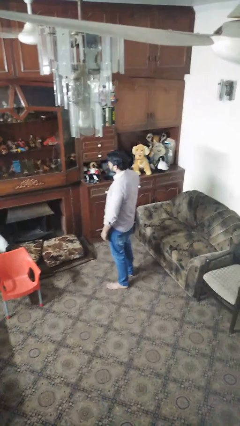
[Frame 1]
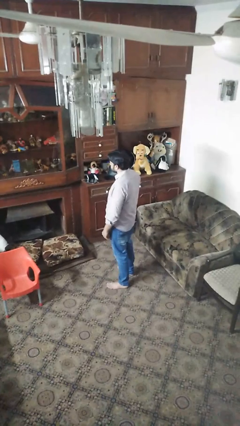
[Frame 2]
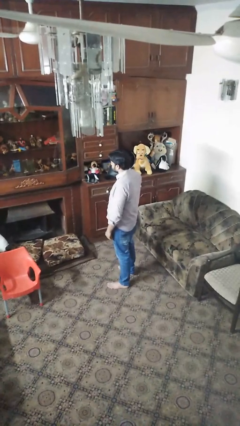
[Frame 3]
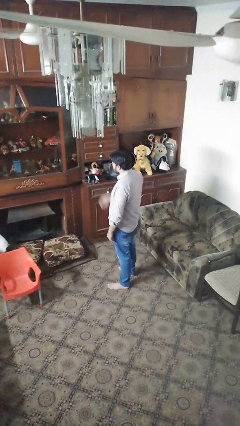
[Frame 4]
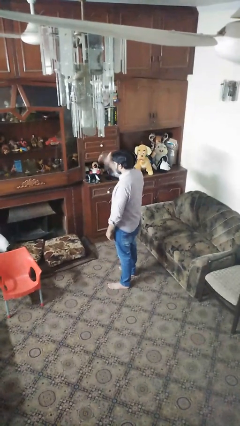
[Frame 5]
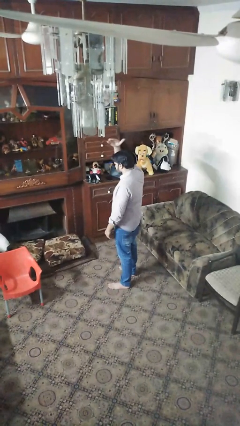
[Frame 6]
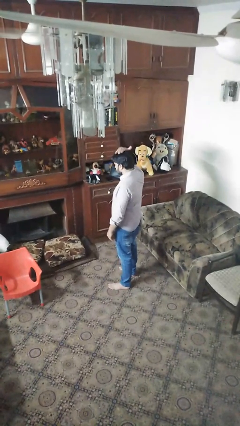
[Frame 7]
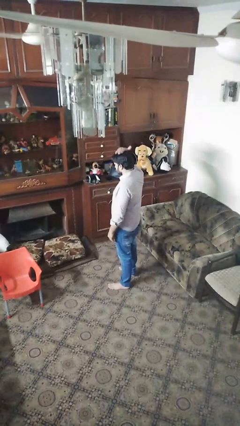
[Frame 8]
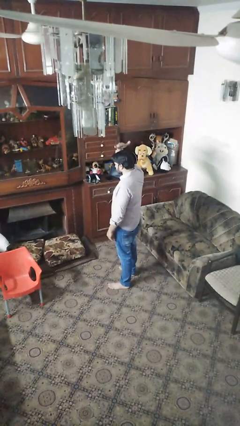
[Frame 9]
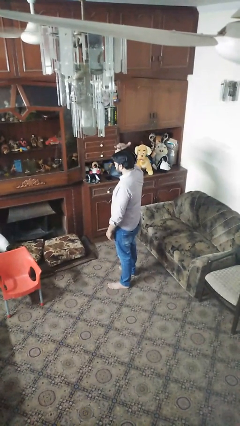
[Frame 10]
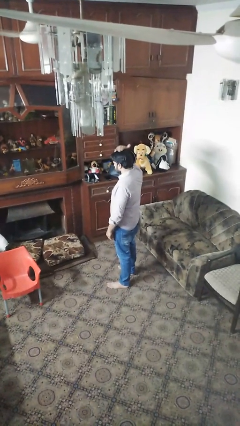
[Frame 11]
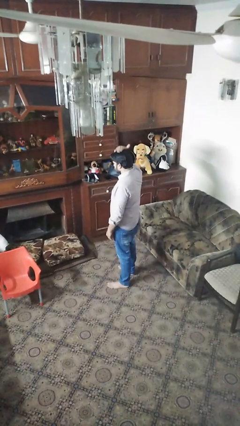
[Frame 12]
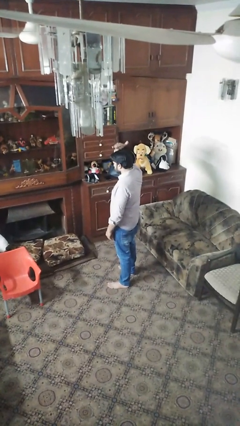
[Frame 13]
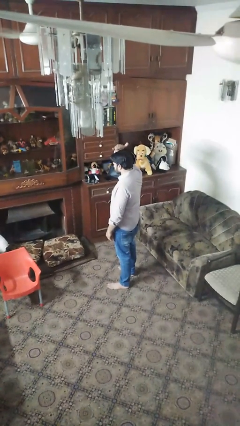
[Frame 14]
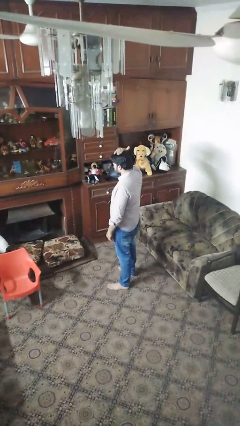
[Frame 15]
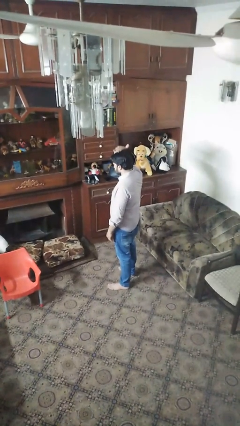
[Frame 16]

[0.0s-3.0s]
person pats head

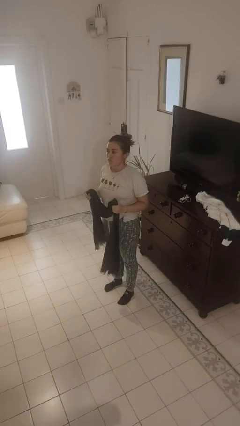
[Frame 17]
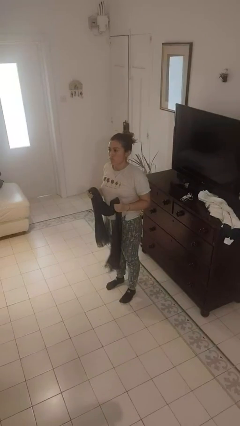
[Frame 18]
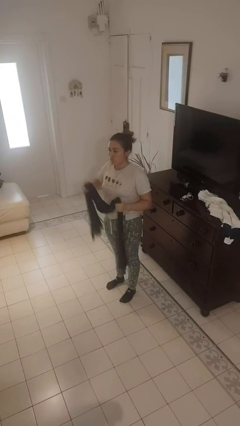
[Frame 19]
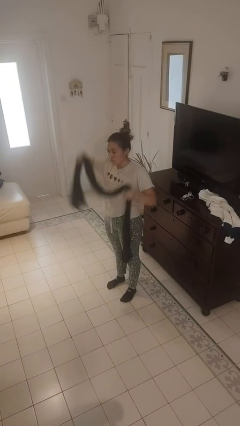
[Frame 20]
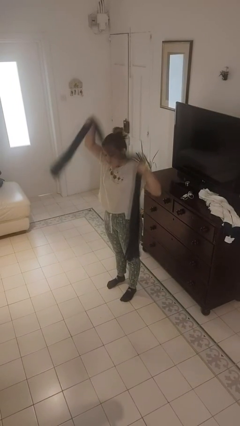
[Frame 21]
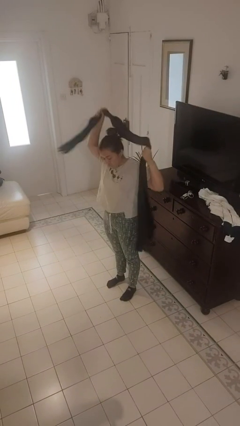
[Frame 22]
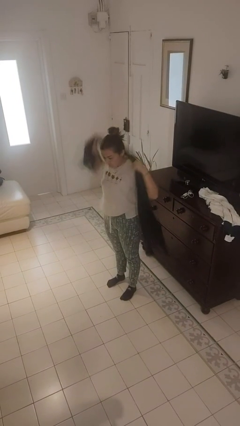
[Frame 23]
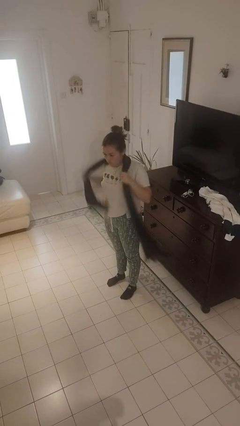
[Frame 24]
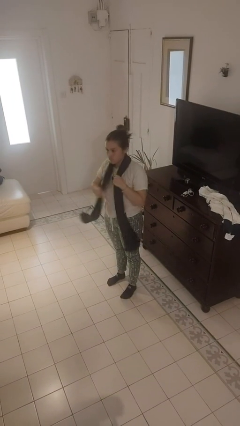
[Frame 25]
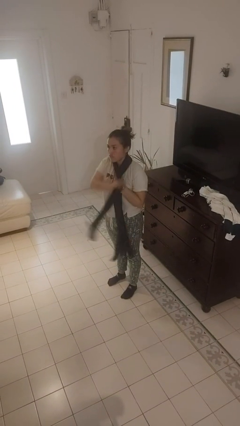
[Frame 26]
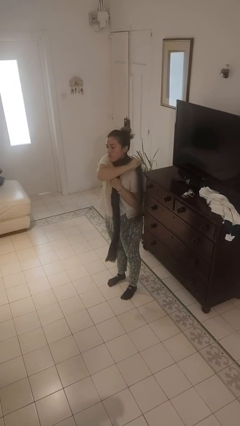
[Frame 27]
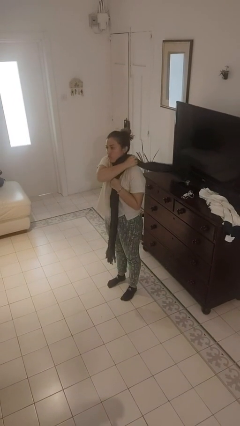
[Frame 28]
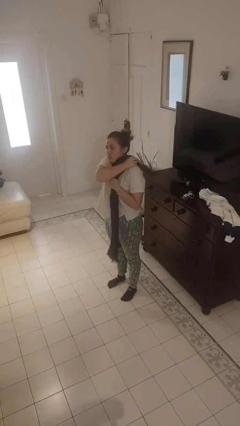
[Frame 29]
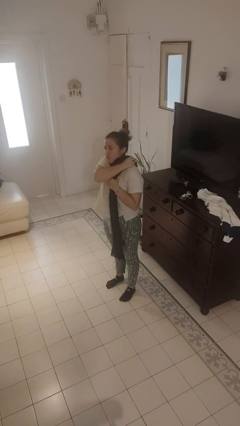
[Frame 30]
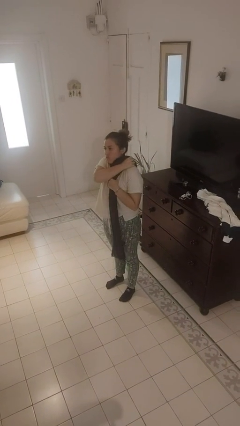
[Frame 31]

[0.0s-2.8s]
person puts on scarf

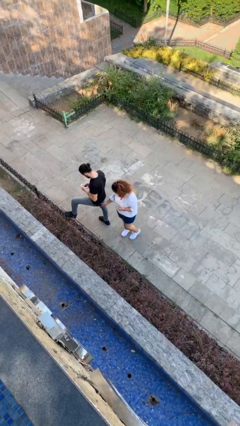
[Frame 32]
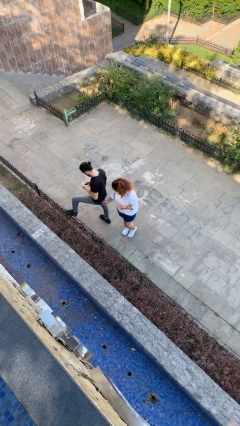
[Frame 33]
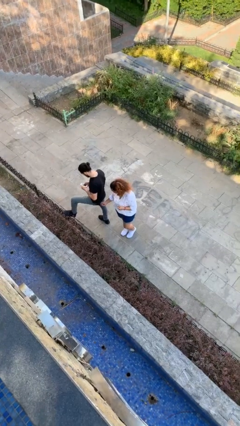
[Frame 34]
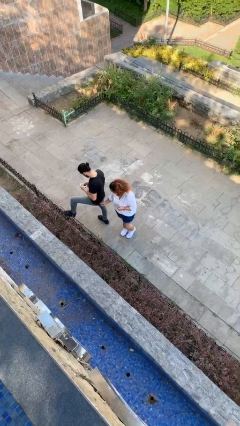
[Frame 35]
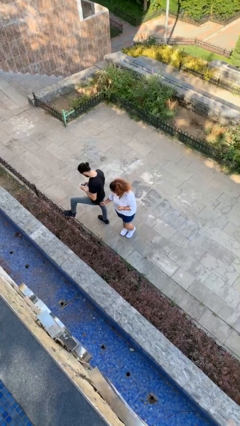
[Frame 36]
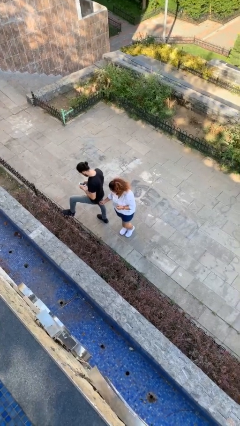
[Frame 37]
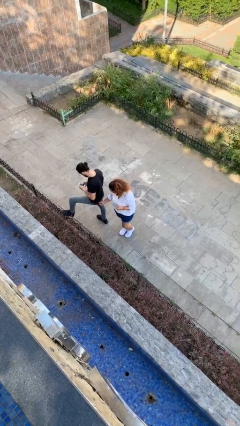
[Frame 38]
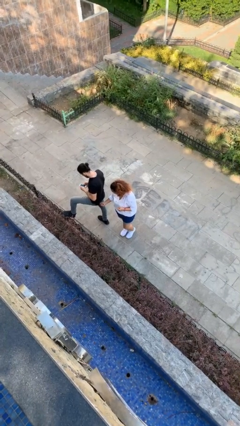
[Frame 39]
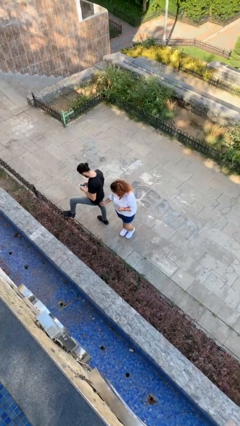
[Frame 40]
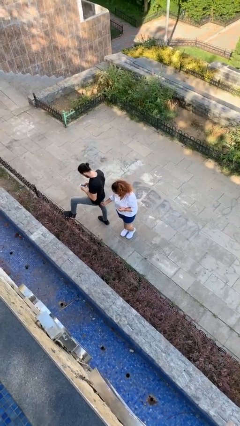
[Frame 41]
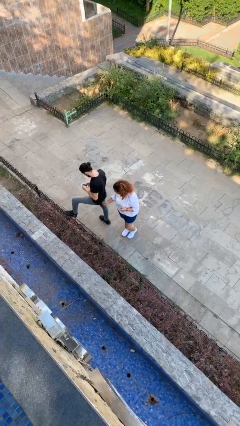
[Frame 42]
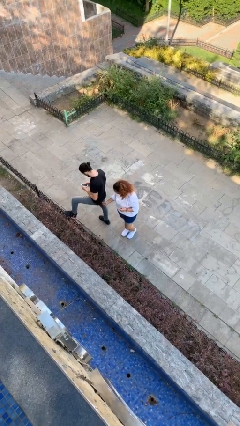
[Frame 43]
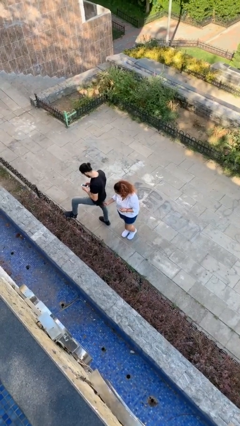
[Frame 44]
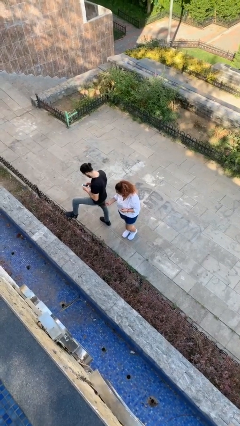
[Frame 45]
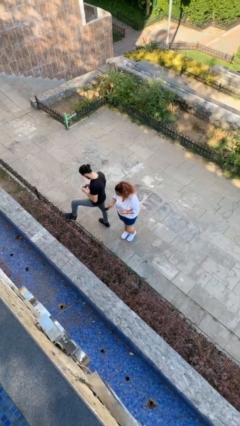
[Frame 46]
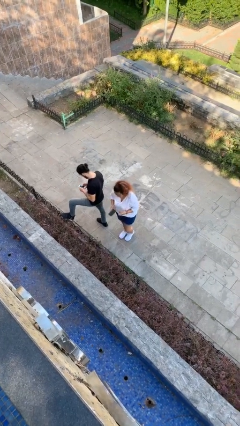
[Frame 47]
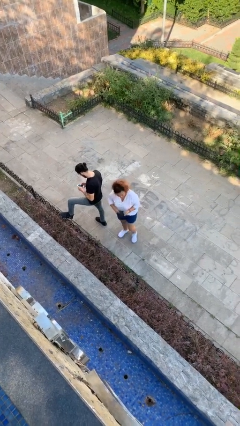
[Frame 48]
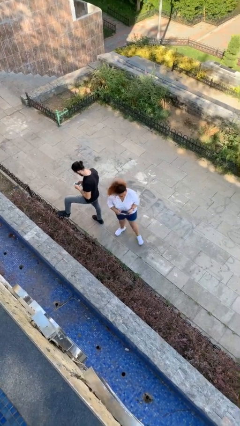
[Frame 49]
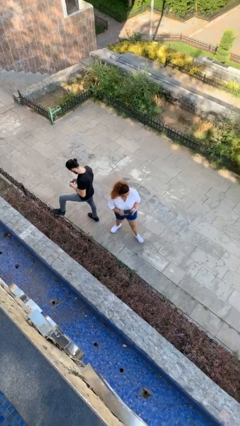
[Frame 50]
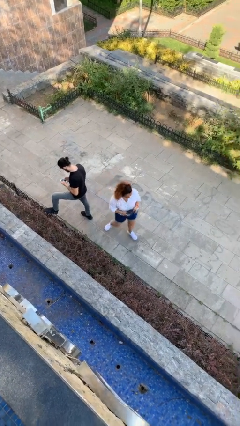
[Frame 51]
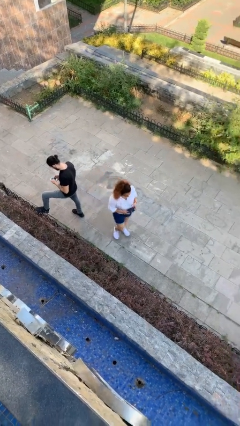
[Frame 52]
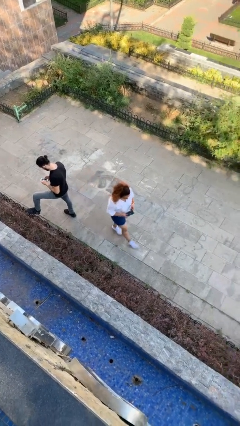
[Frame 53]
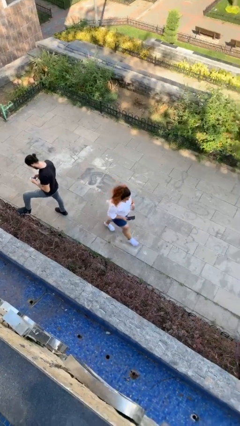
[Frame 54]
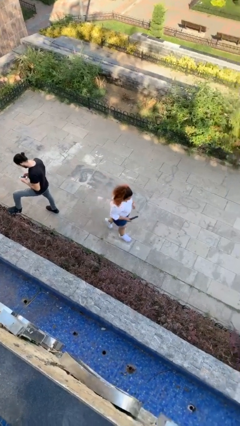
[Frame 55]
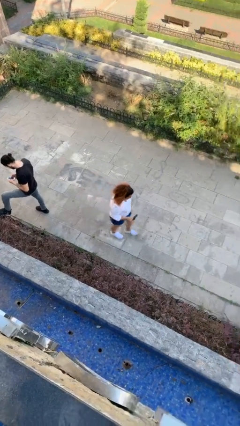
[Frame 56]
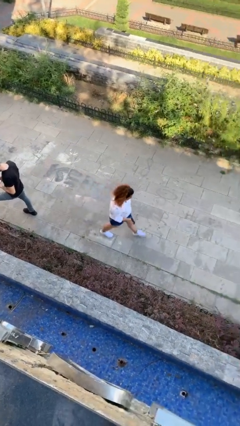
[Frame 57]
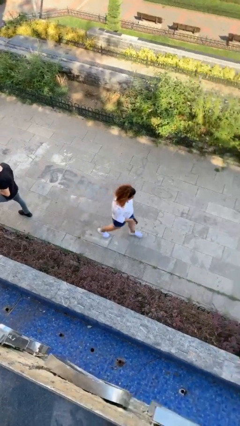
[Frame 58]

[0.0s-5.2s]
person steals object from person

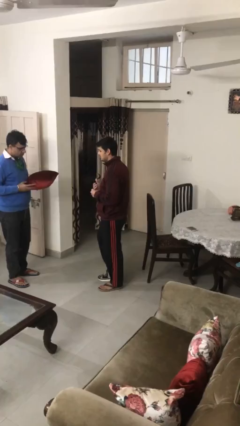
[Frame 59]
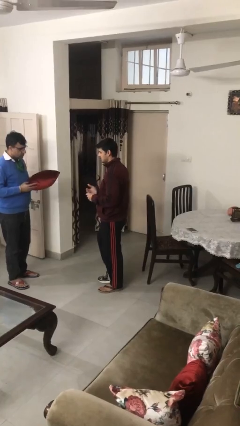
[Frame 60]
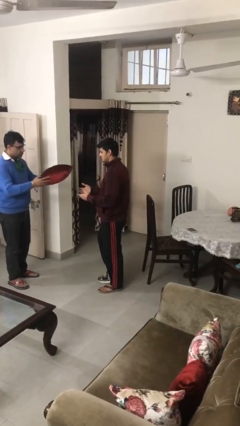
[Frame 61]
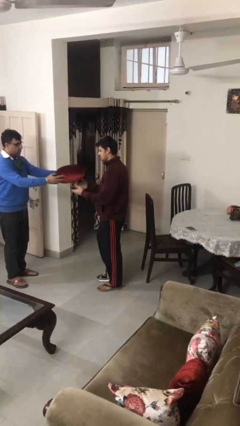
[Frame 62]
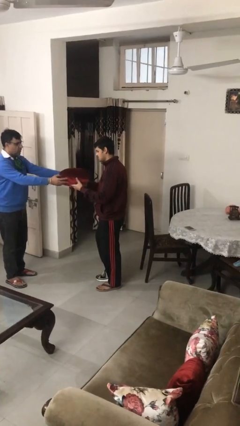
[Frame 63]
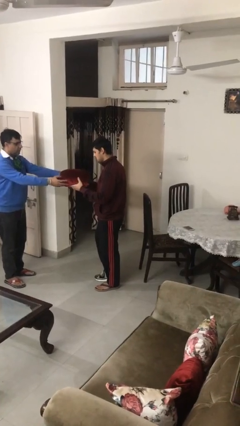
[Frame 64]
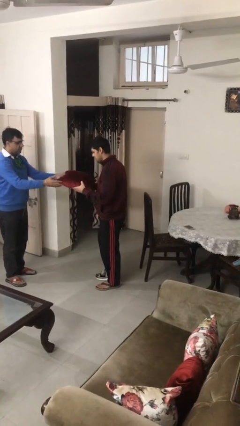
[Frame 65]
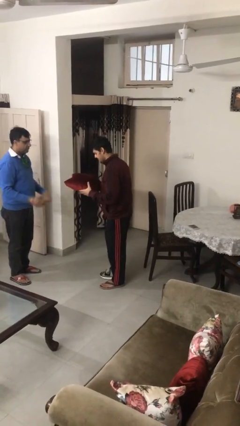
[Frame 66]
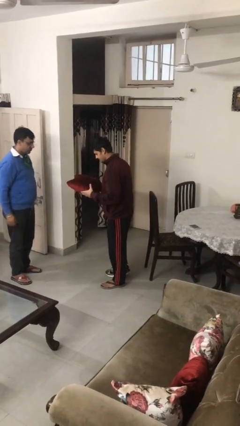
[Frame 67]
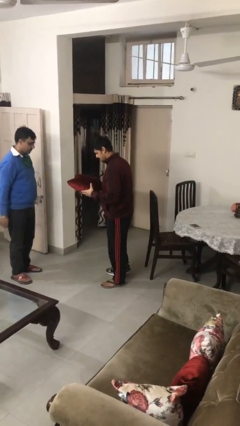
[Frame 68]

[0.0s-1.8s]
person transfers object to person

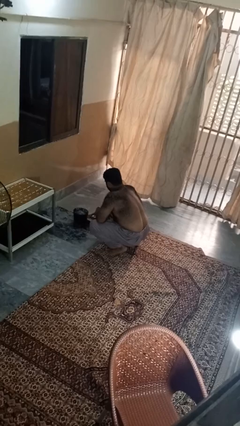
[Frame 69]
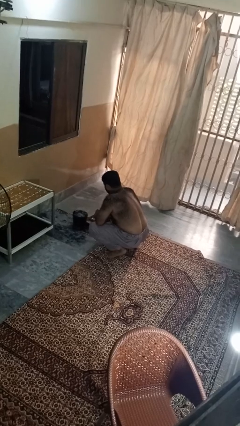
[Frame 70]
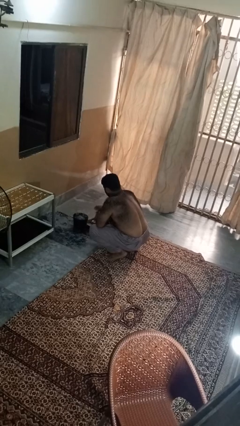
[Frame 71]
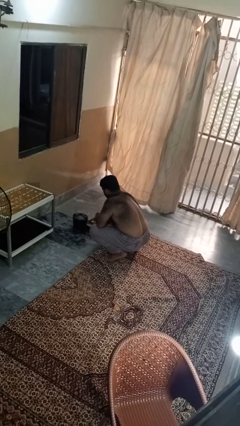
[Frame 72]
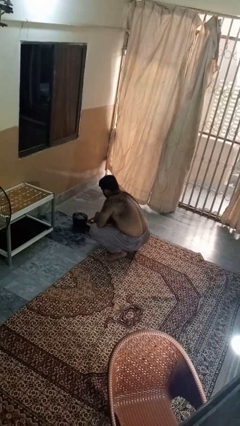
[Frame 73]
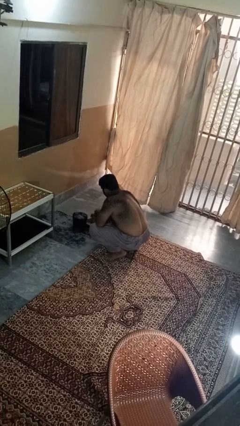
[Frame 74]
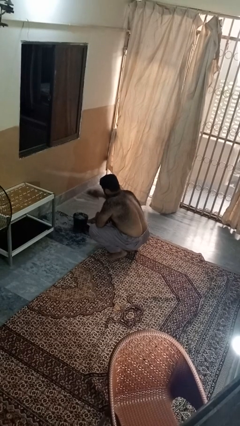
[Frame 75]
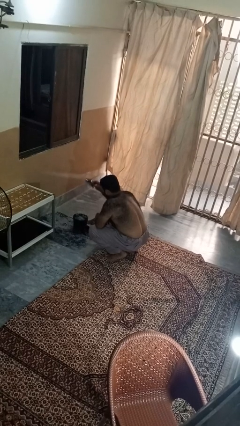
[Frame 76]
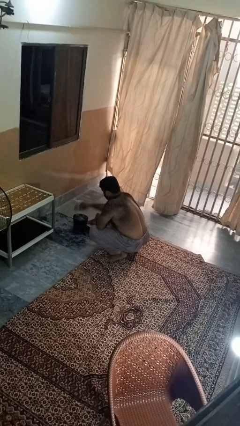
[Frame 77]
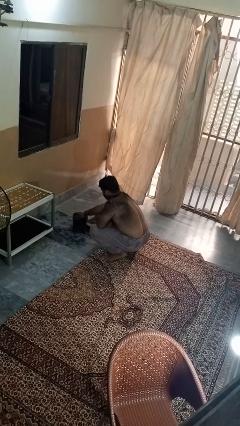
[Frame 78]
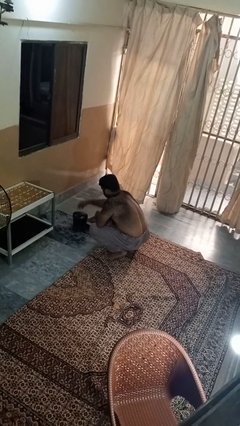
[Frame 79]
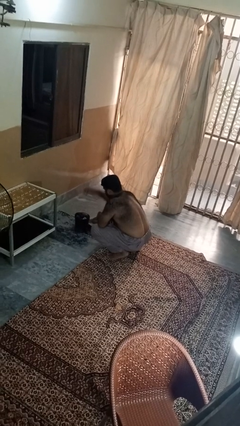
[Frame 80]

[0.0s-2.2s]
person discards trash

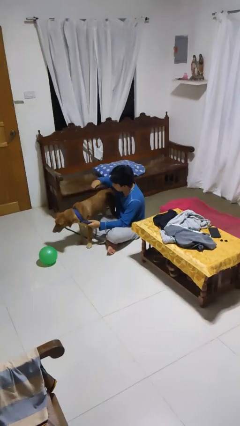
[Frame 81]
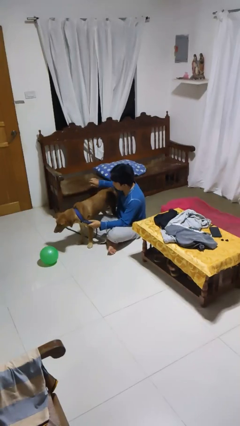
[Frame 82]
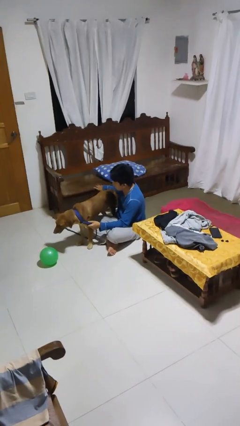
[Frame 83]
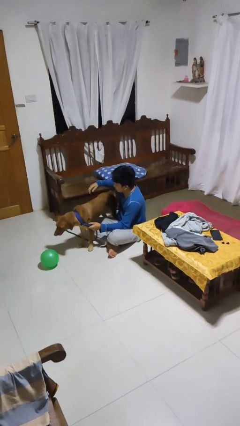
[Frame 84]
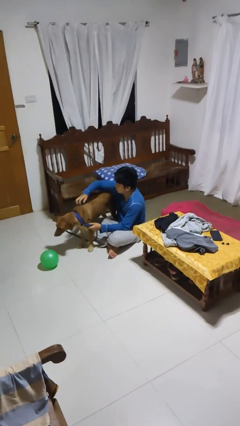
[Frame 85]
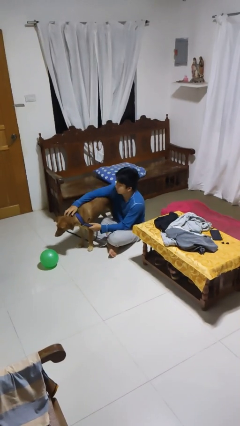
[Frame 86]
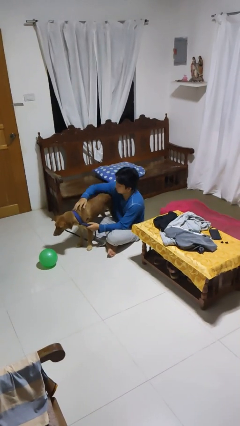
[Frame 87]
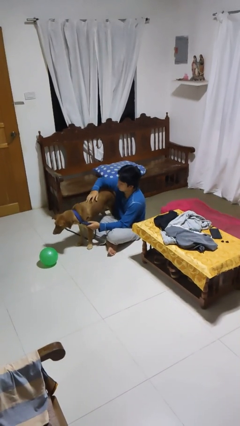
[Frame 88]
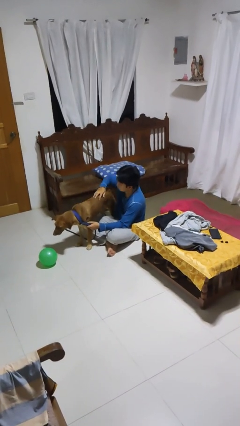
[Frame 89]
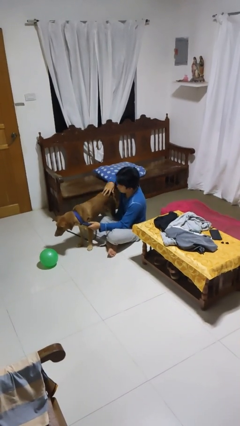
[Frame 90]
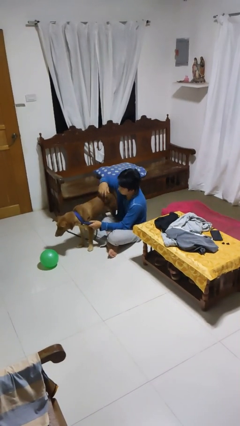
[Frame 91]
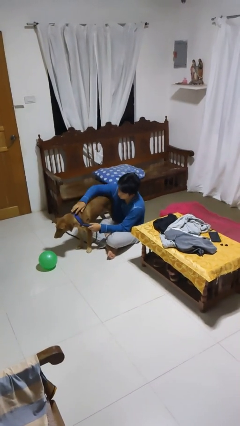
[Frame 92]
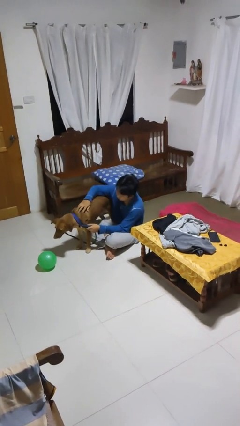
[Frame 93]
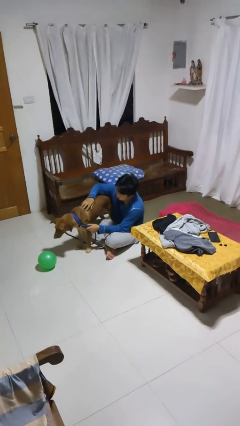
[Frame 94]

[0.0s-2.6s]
person pets dog
